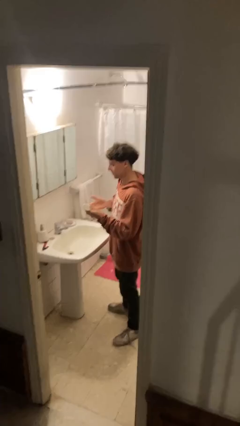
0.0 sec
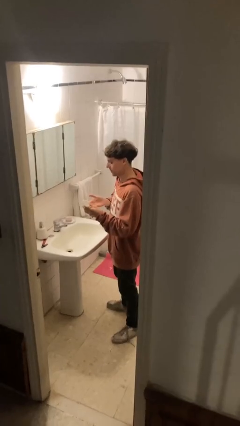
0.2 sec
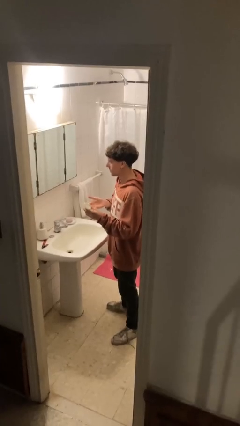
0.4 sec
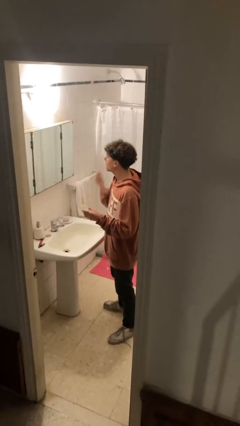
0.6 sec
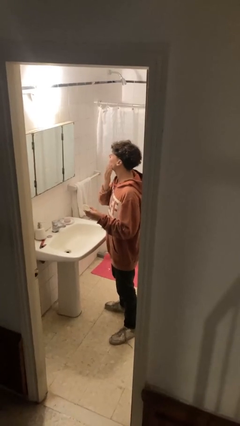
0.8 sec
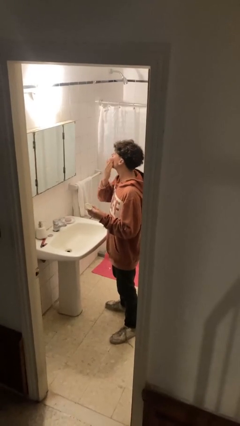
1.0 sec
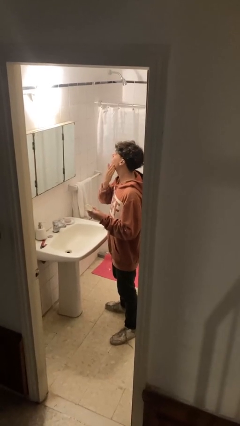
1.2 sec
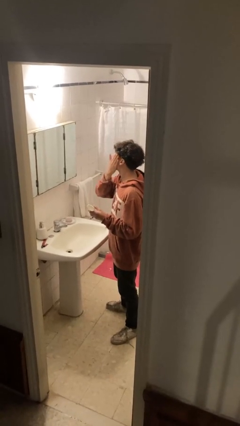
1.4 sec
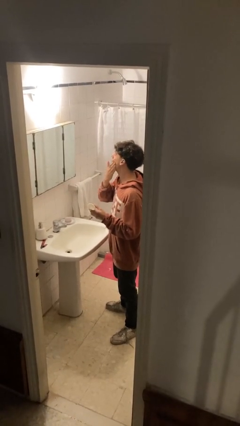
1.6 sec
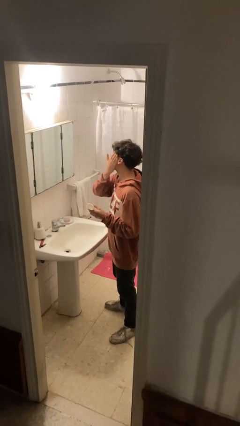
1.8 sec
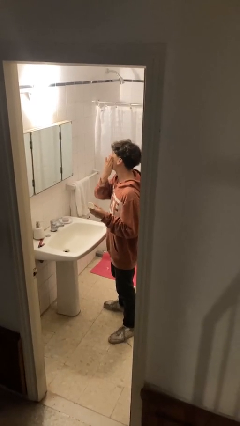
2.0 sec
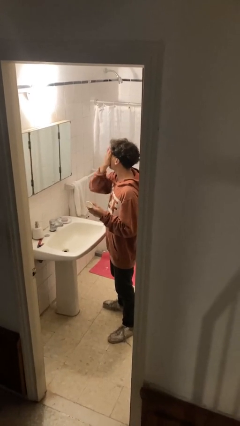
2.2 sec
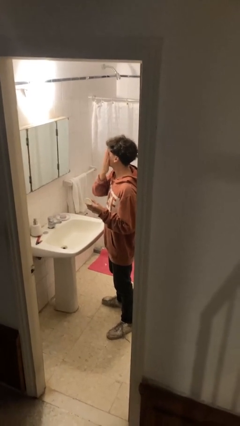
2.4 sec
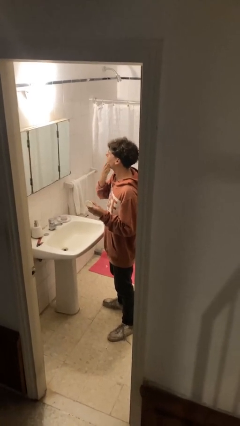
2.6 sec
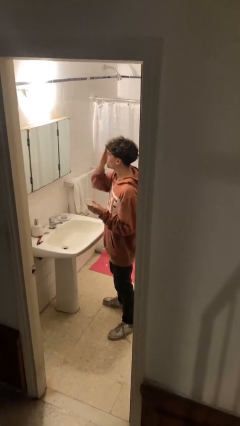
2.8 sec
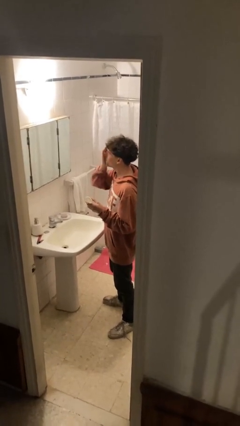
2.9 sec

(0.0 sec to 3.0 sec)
person applies foundation makeup

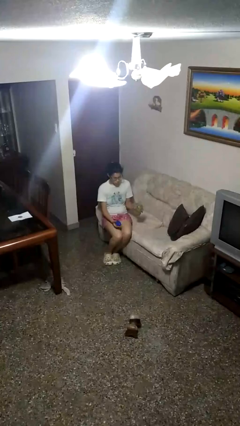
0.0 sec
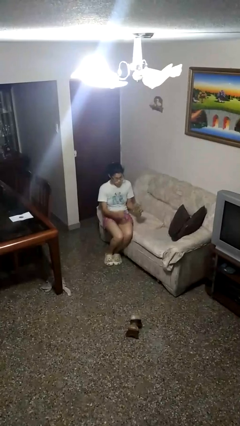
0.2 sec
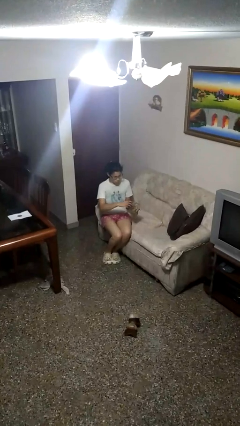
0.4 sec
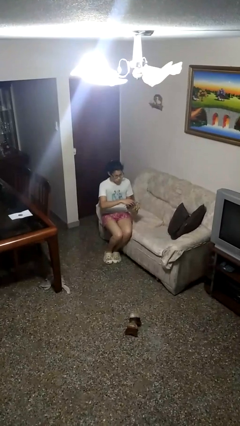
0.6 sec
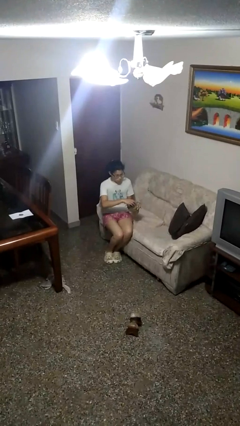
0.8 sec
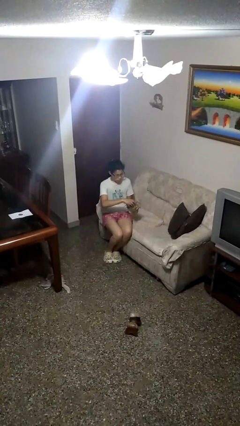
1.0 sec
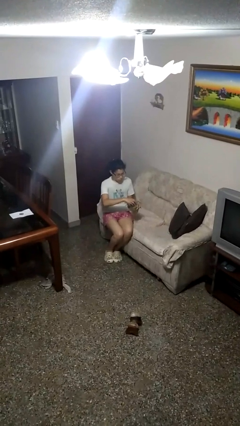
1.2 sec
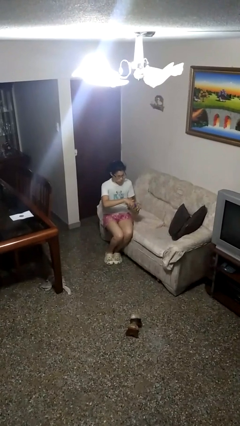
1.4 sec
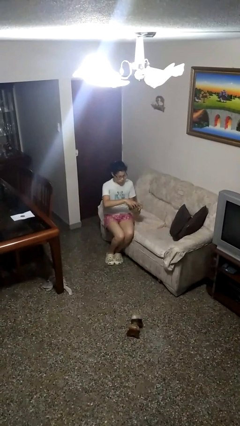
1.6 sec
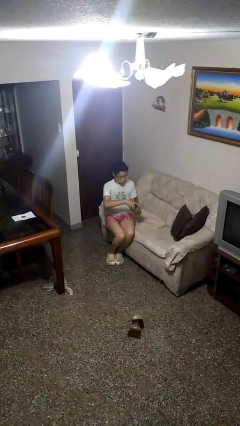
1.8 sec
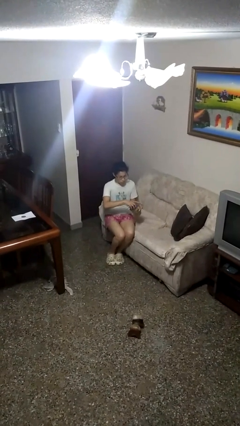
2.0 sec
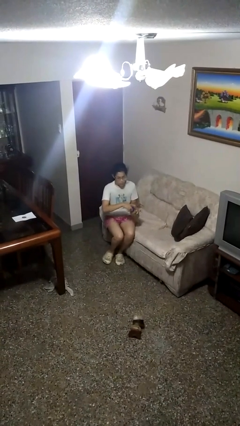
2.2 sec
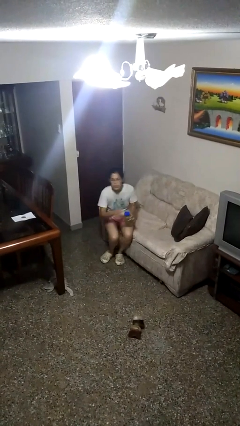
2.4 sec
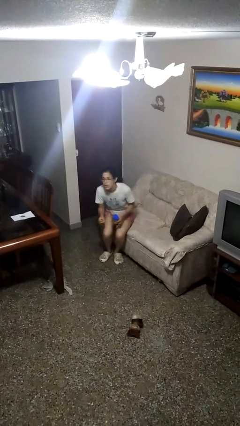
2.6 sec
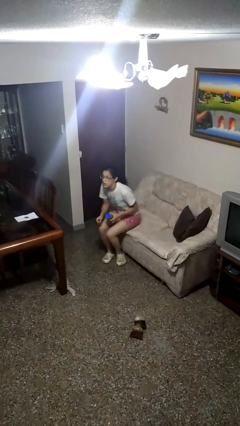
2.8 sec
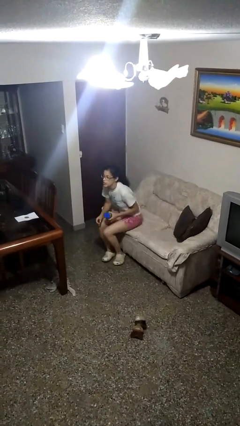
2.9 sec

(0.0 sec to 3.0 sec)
person closes jar

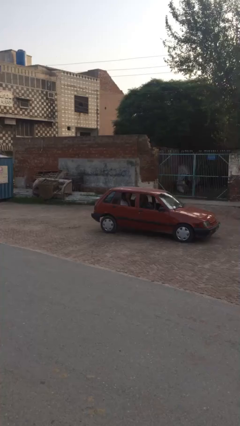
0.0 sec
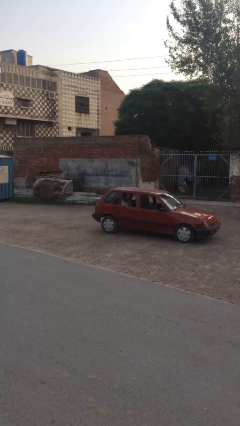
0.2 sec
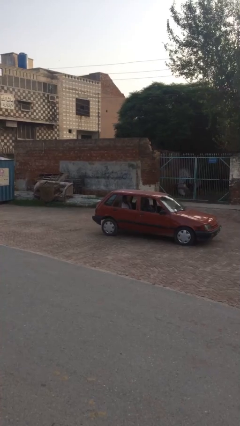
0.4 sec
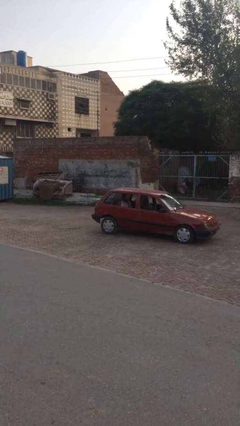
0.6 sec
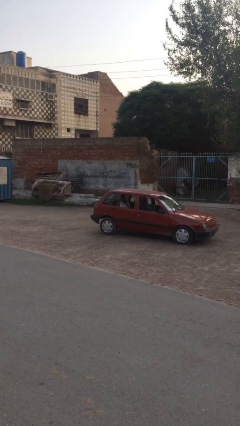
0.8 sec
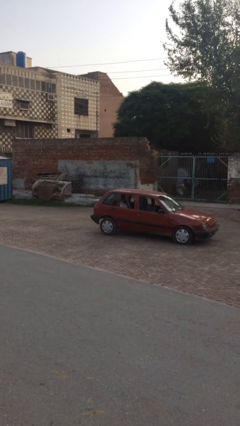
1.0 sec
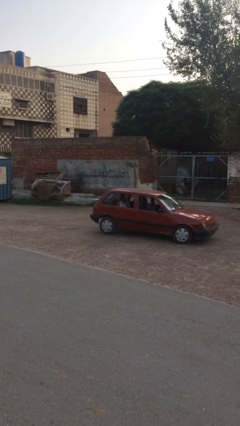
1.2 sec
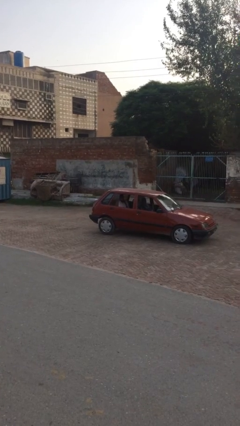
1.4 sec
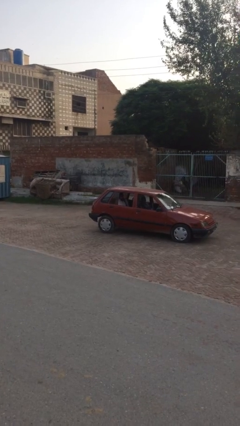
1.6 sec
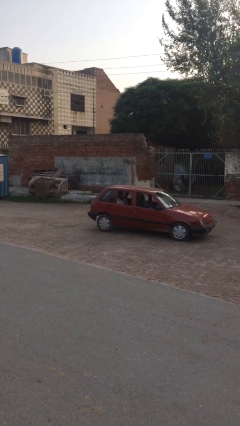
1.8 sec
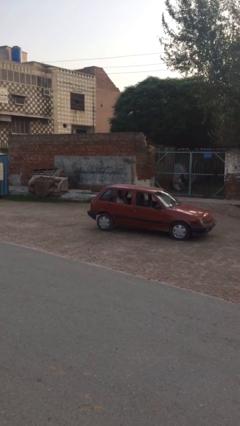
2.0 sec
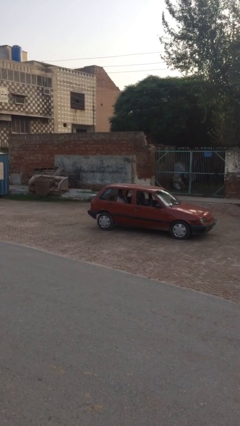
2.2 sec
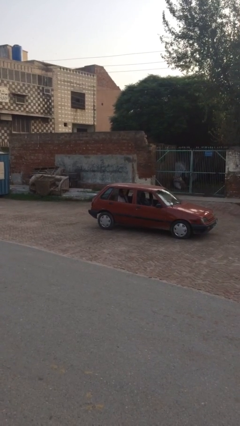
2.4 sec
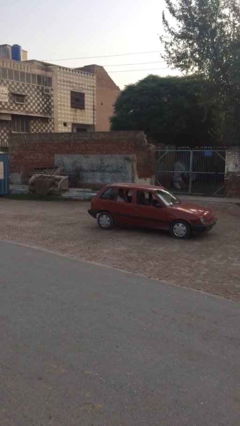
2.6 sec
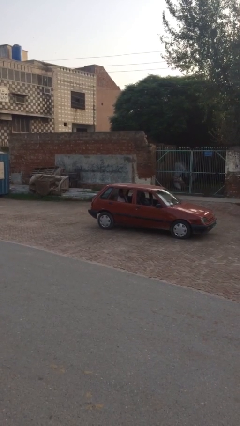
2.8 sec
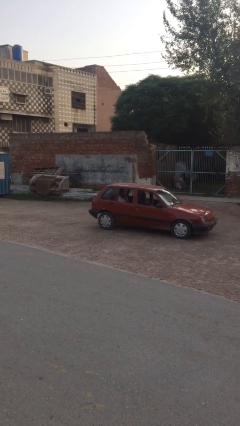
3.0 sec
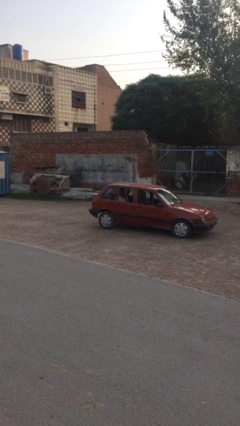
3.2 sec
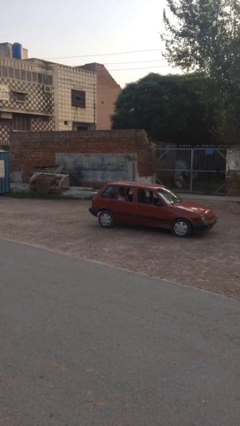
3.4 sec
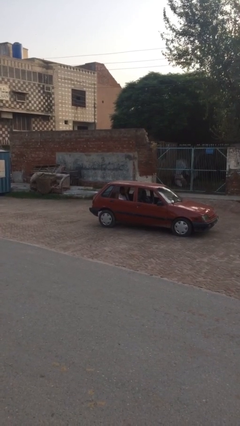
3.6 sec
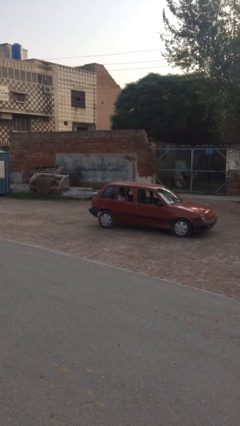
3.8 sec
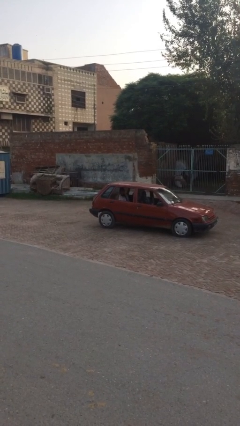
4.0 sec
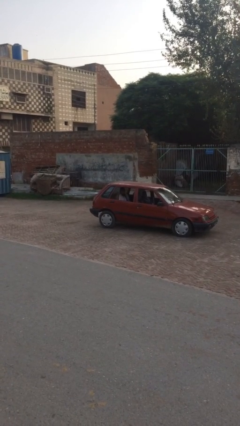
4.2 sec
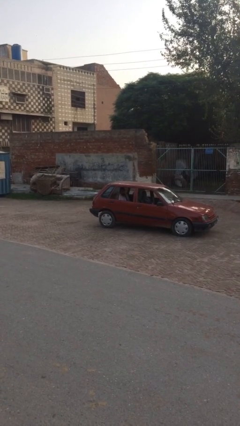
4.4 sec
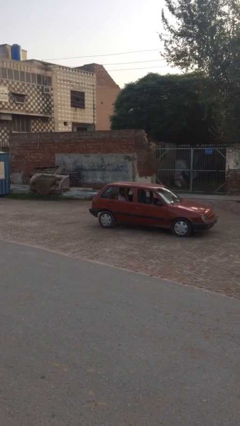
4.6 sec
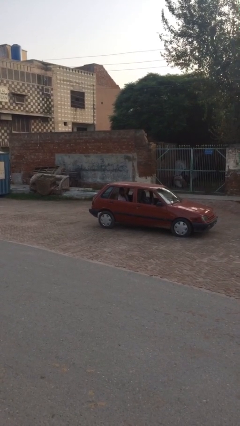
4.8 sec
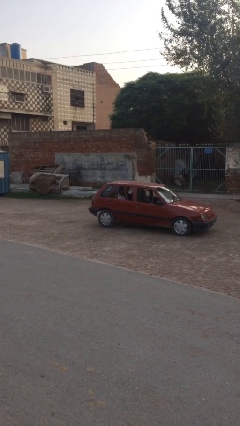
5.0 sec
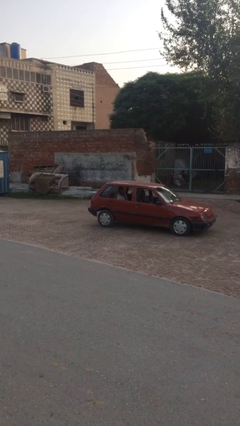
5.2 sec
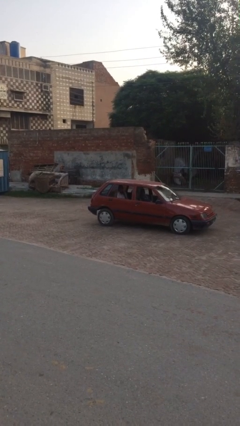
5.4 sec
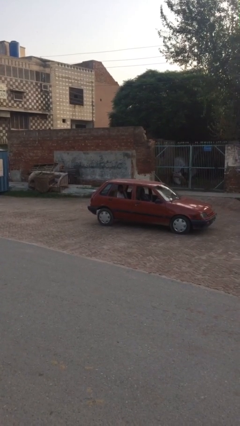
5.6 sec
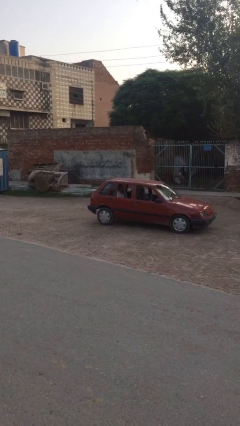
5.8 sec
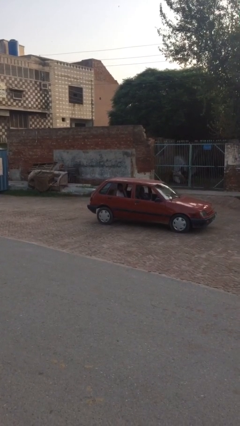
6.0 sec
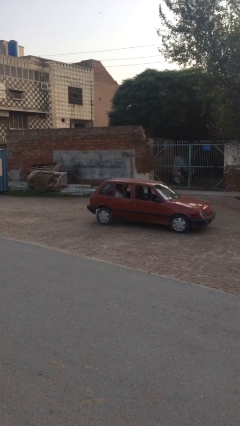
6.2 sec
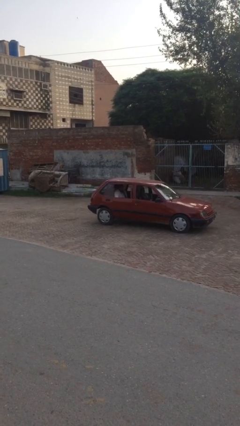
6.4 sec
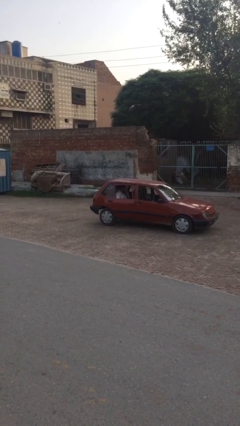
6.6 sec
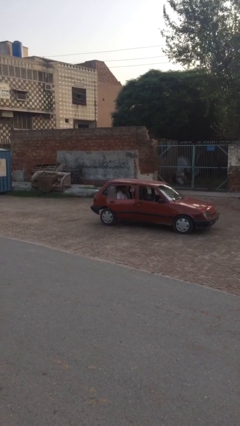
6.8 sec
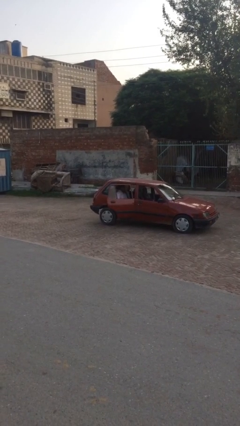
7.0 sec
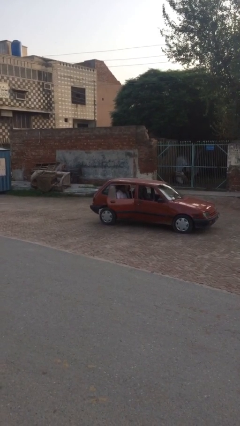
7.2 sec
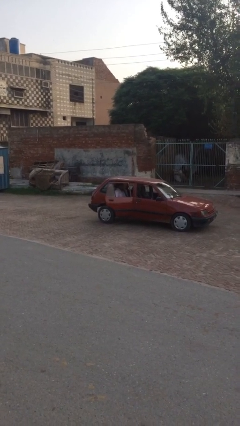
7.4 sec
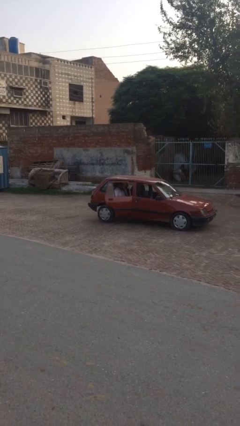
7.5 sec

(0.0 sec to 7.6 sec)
person opens car door

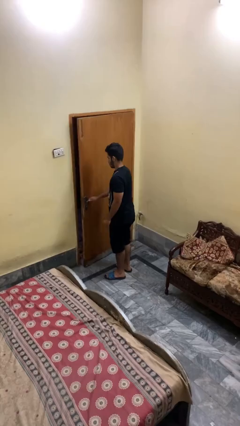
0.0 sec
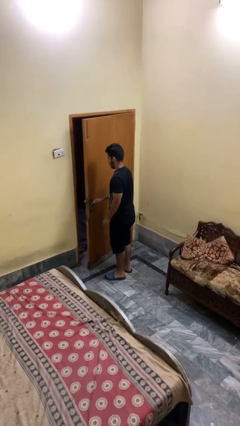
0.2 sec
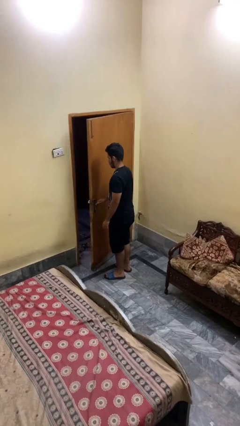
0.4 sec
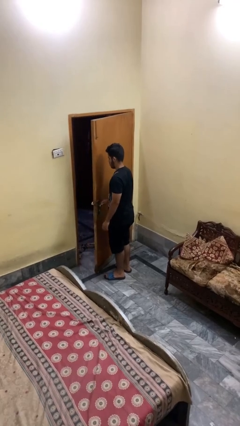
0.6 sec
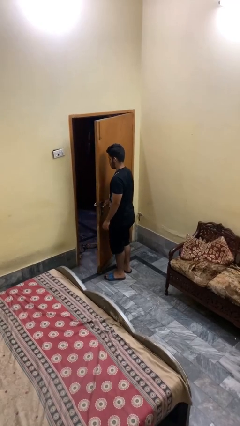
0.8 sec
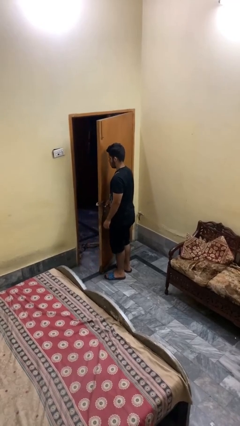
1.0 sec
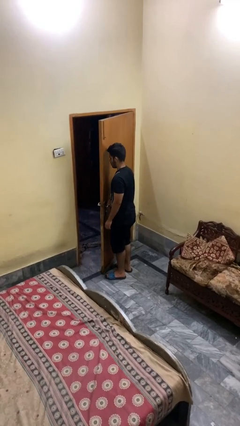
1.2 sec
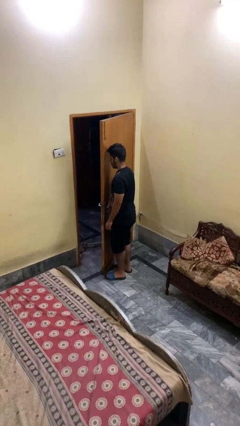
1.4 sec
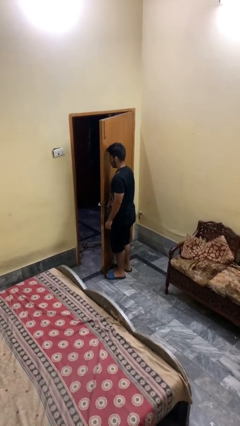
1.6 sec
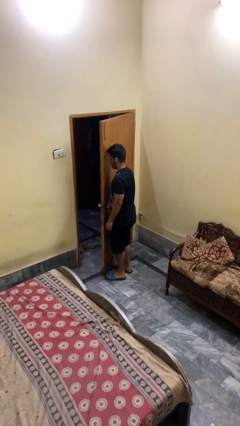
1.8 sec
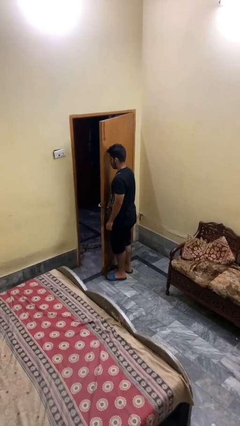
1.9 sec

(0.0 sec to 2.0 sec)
person opens facility door

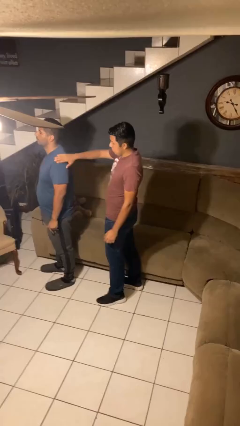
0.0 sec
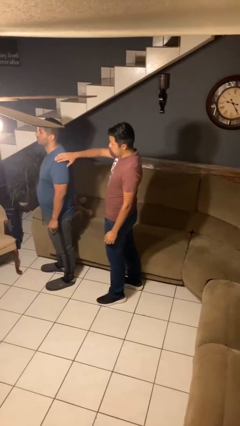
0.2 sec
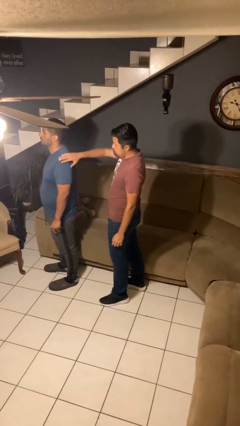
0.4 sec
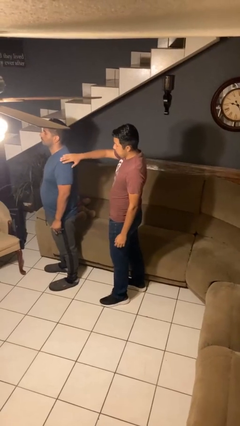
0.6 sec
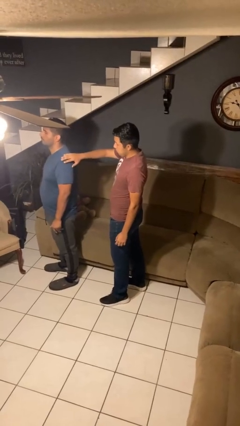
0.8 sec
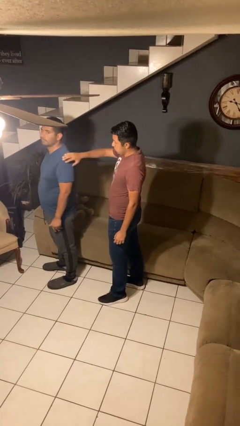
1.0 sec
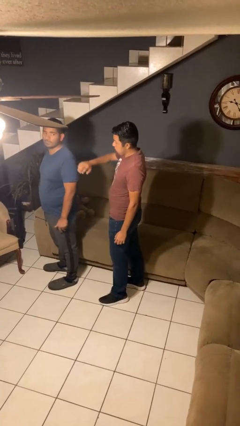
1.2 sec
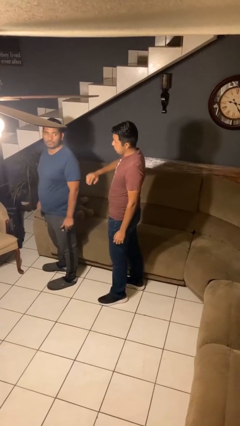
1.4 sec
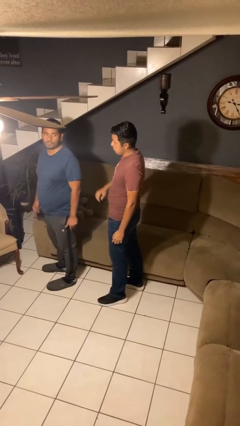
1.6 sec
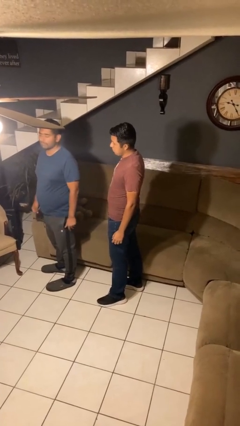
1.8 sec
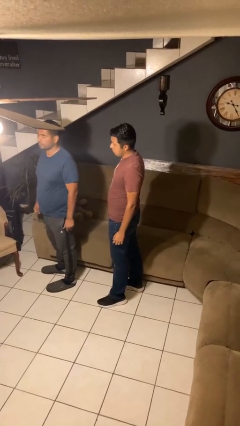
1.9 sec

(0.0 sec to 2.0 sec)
person touches back of person

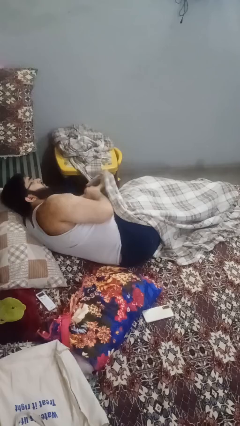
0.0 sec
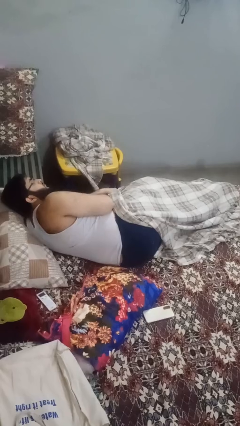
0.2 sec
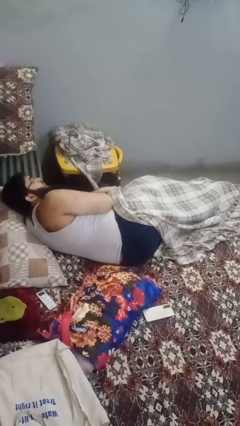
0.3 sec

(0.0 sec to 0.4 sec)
person uncovers with blanket
